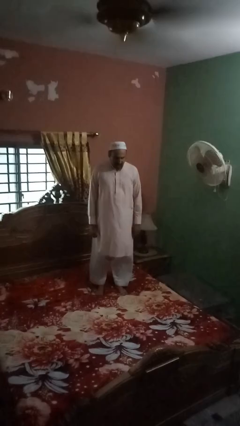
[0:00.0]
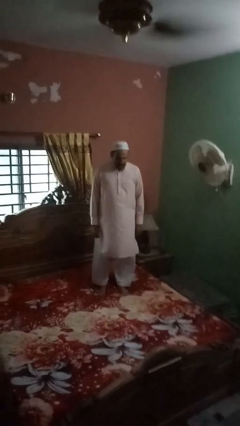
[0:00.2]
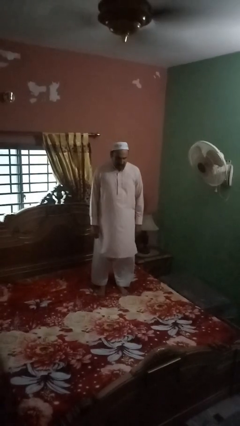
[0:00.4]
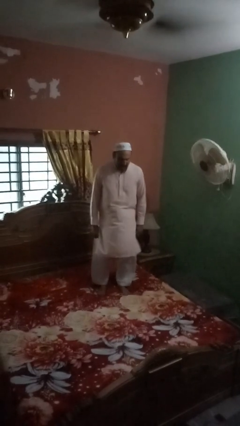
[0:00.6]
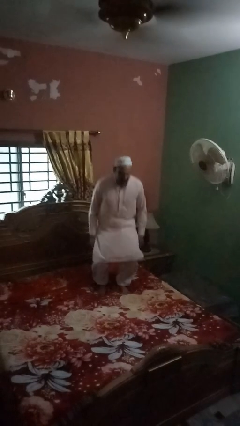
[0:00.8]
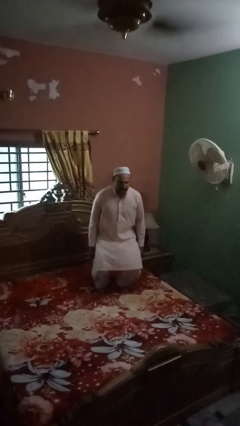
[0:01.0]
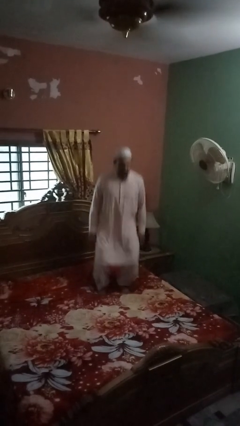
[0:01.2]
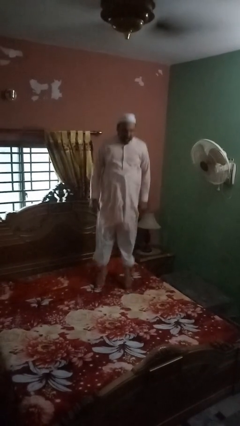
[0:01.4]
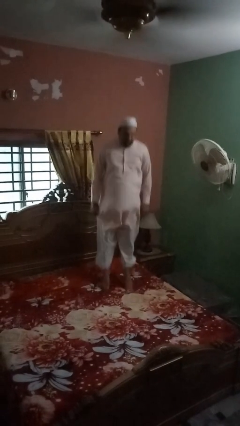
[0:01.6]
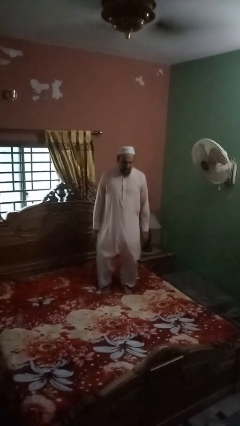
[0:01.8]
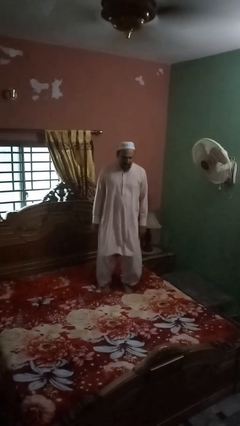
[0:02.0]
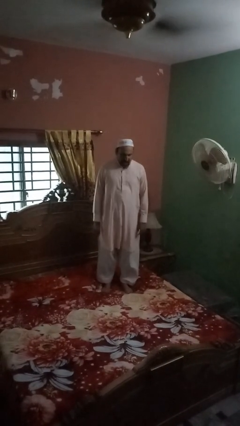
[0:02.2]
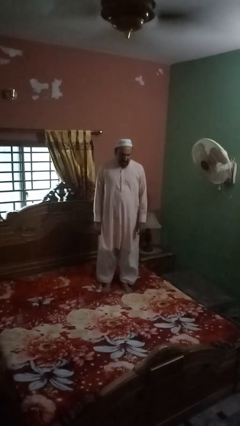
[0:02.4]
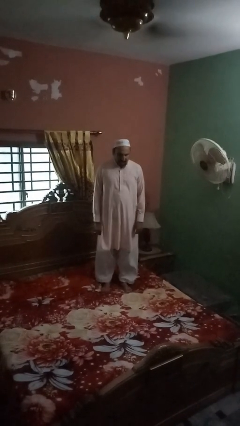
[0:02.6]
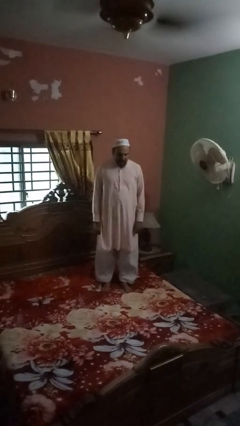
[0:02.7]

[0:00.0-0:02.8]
person jumps on bed

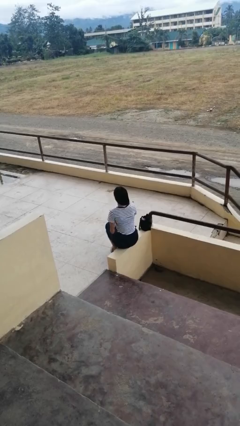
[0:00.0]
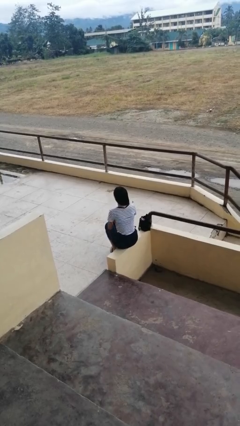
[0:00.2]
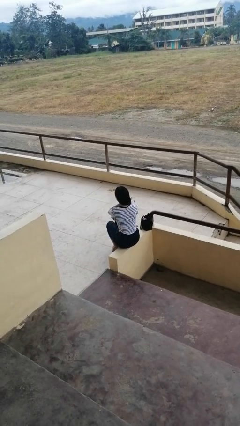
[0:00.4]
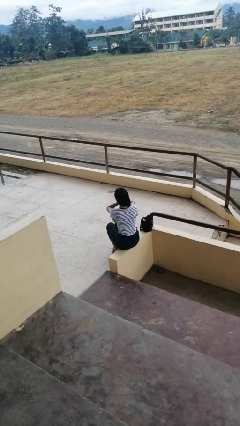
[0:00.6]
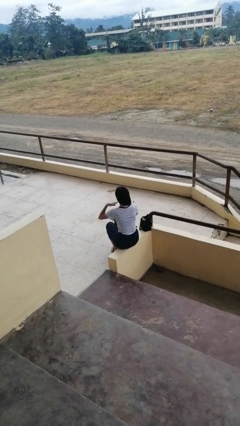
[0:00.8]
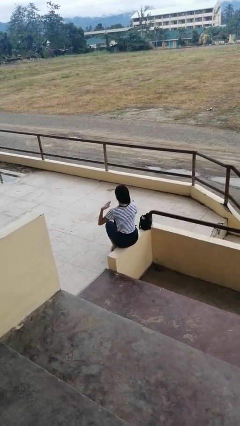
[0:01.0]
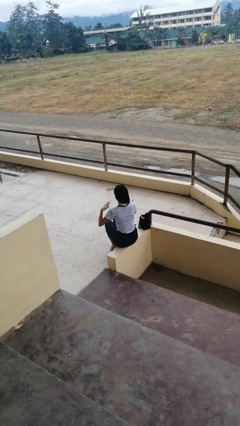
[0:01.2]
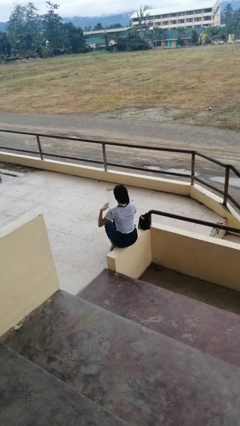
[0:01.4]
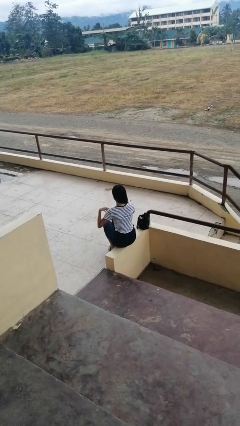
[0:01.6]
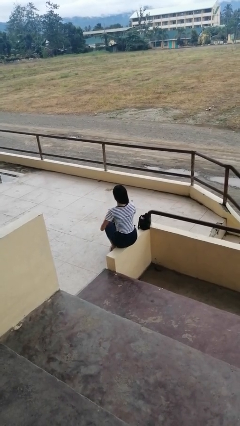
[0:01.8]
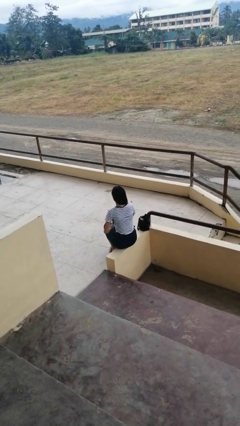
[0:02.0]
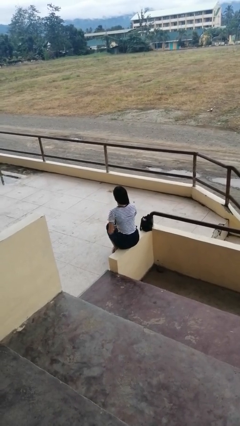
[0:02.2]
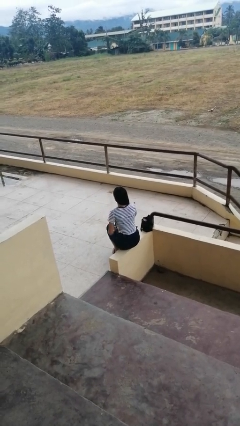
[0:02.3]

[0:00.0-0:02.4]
person gestures cut

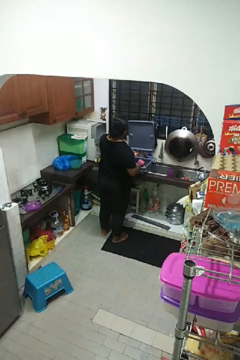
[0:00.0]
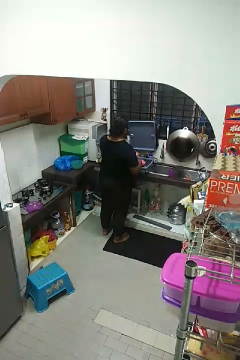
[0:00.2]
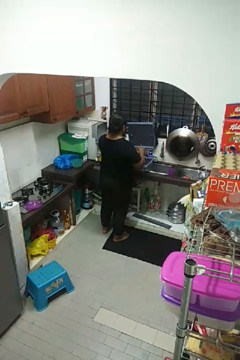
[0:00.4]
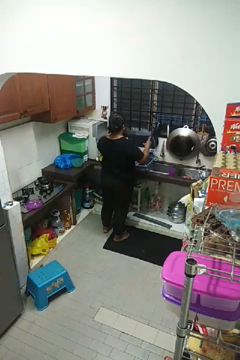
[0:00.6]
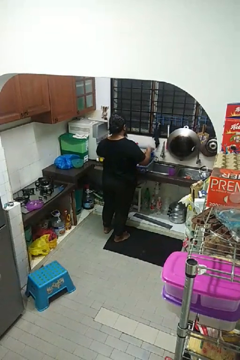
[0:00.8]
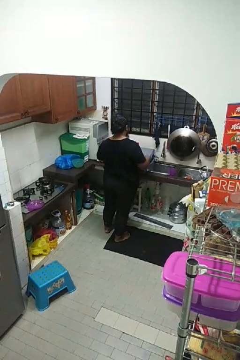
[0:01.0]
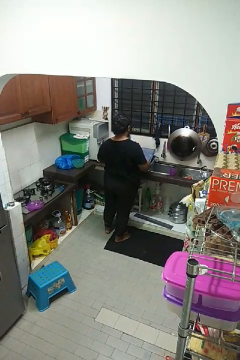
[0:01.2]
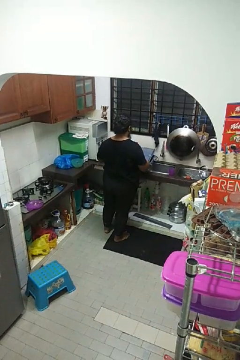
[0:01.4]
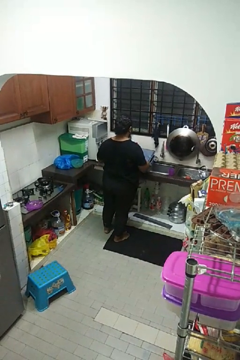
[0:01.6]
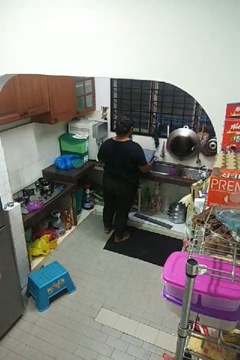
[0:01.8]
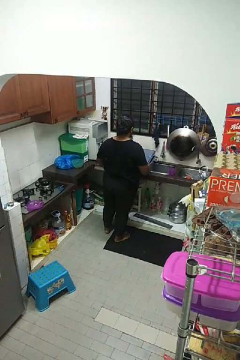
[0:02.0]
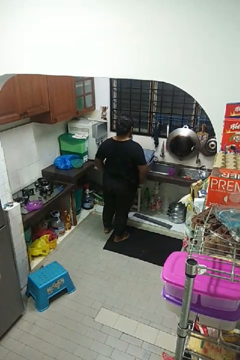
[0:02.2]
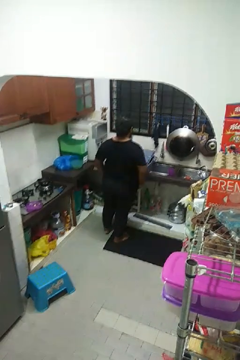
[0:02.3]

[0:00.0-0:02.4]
person closes dishwasher

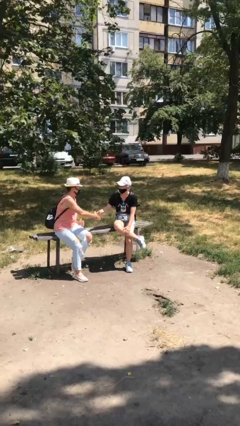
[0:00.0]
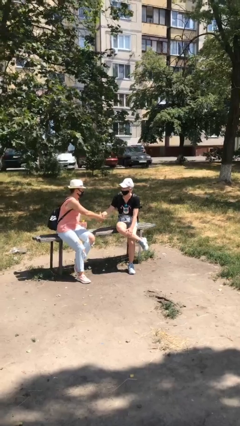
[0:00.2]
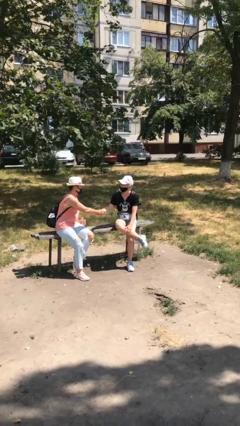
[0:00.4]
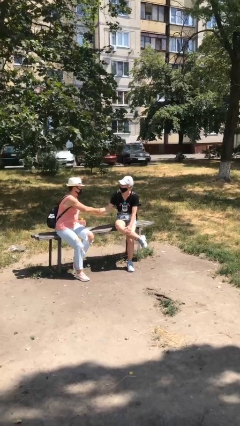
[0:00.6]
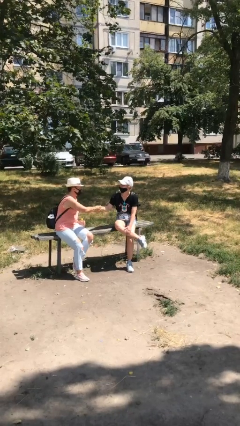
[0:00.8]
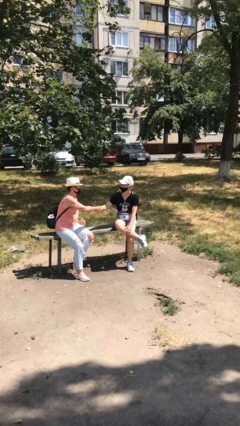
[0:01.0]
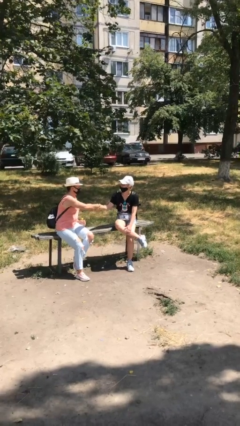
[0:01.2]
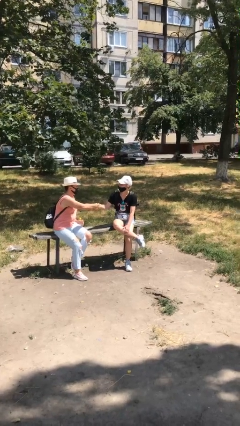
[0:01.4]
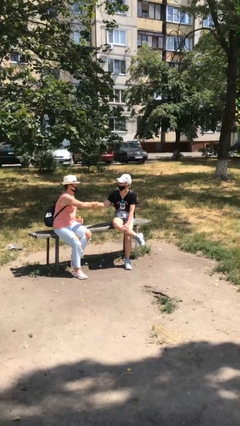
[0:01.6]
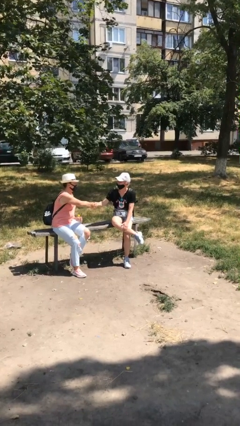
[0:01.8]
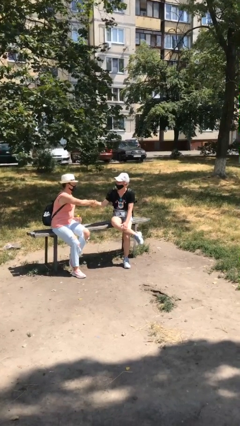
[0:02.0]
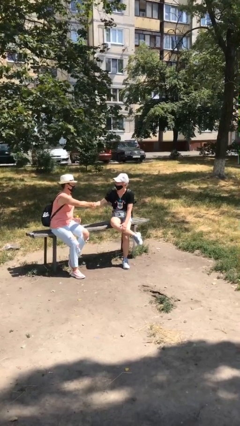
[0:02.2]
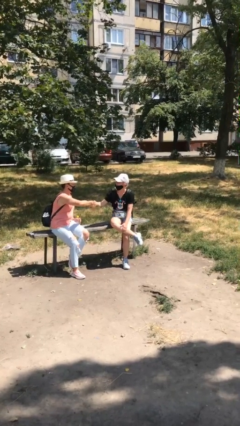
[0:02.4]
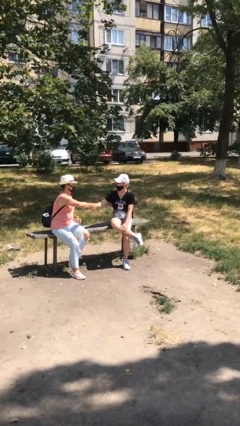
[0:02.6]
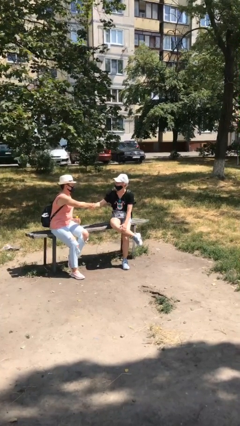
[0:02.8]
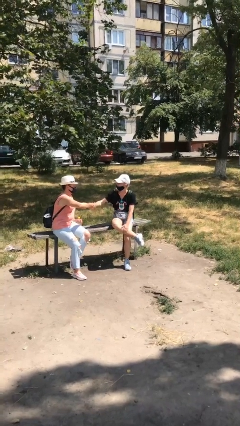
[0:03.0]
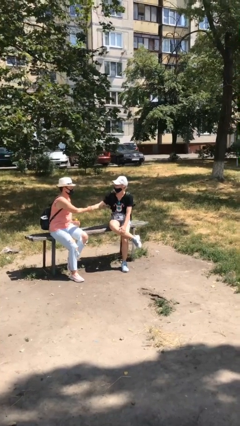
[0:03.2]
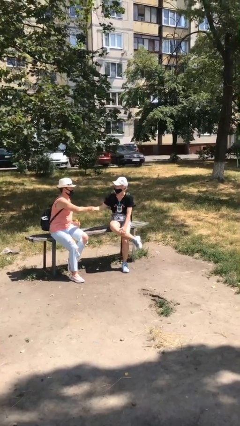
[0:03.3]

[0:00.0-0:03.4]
person shakes hand

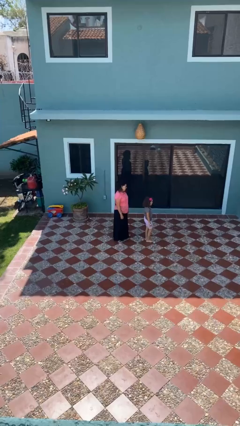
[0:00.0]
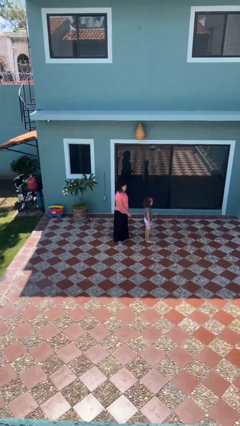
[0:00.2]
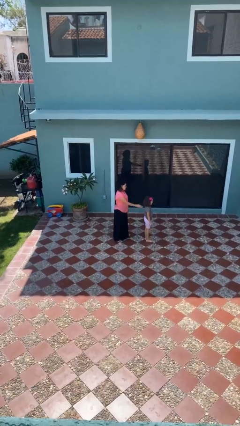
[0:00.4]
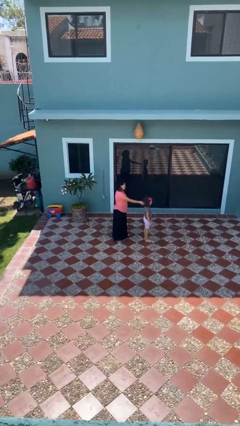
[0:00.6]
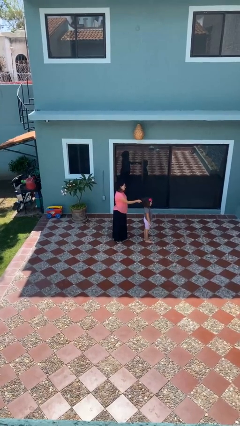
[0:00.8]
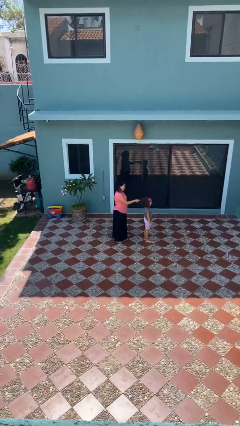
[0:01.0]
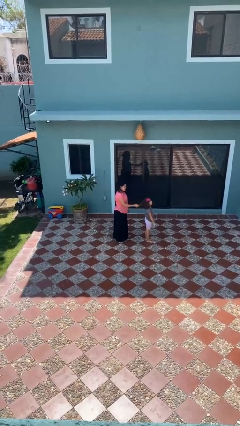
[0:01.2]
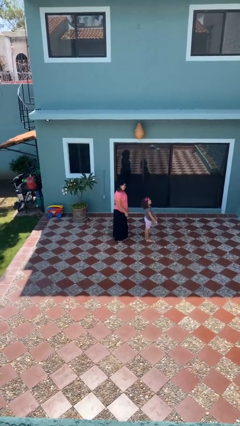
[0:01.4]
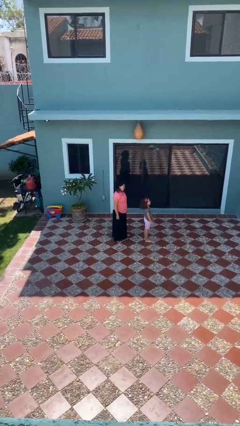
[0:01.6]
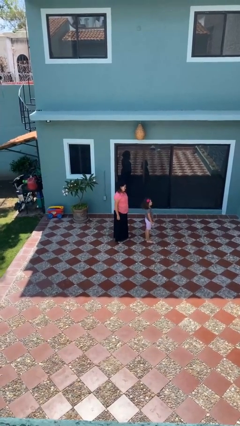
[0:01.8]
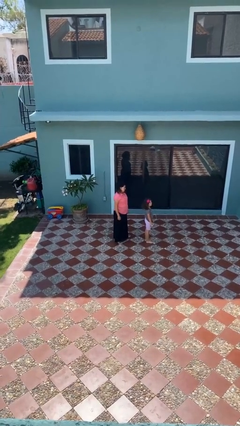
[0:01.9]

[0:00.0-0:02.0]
person grabs person by hair

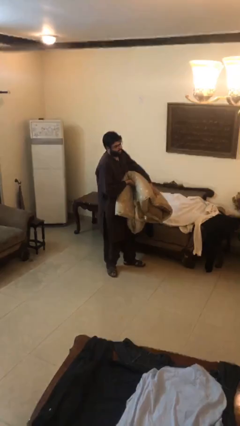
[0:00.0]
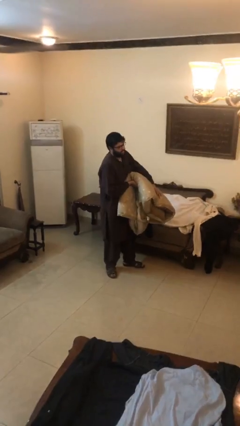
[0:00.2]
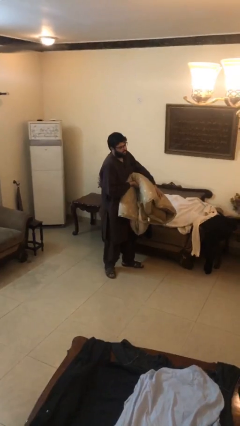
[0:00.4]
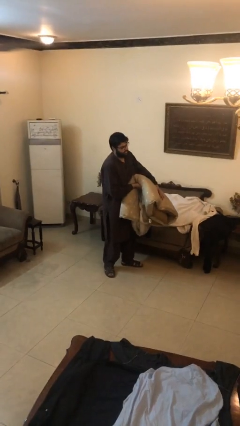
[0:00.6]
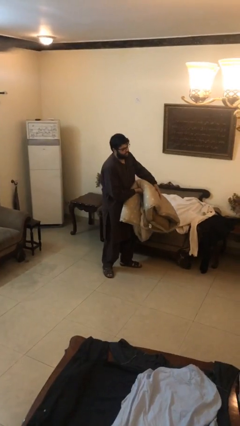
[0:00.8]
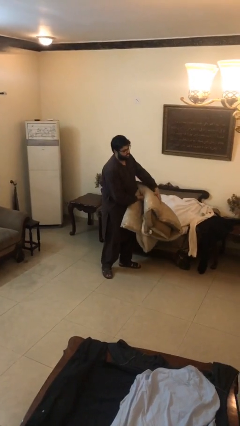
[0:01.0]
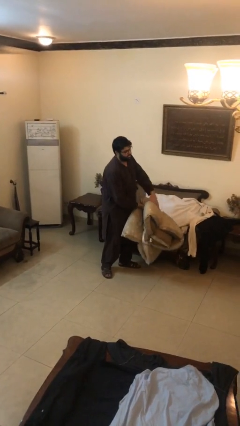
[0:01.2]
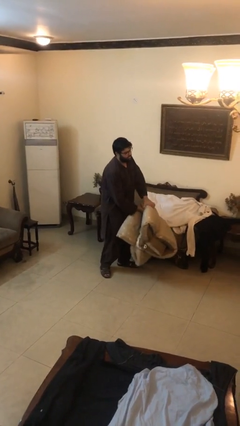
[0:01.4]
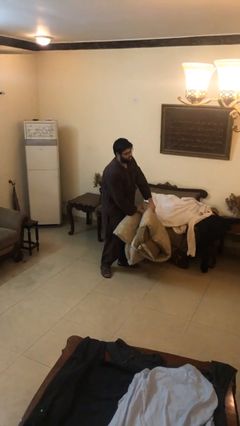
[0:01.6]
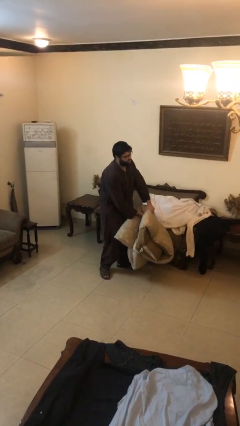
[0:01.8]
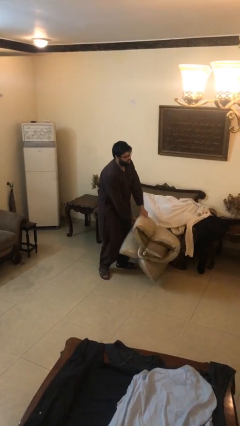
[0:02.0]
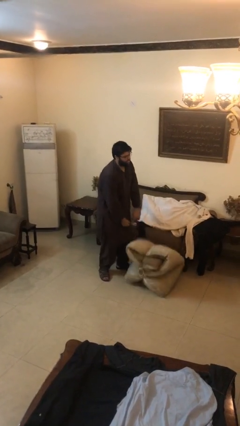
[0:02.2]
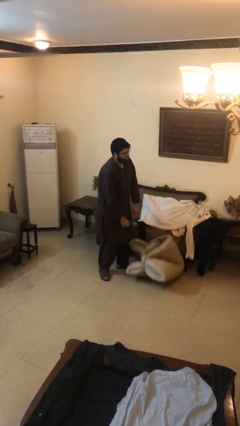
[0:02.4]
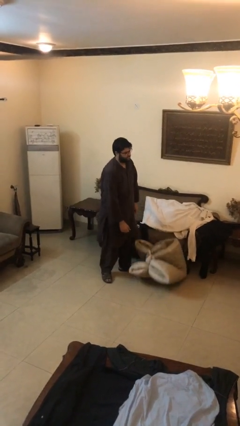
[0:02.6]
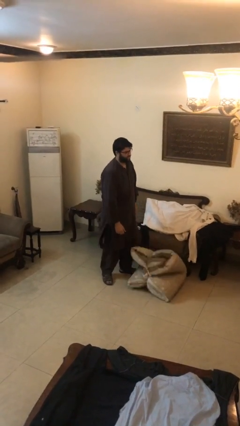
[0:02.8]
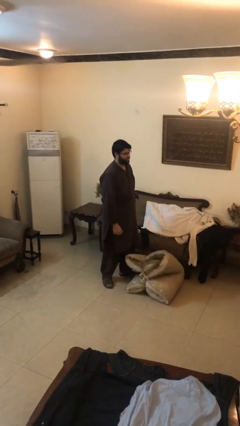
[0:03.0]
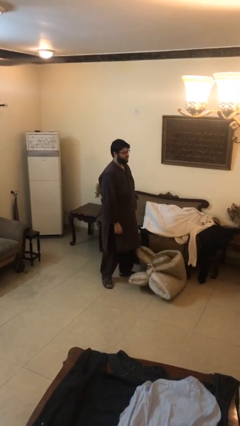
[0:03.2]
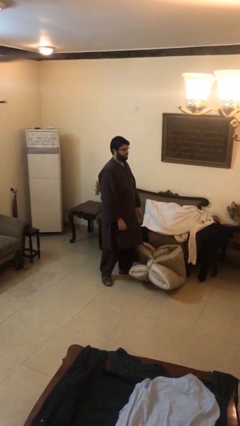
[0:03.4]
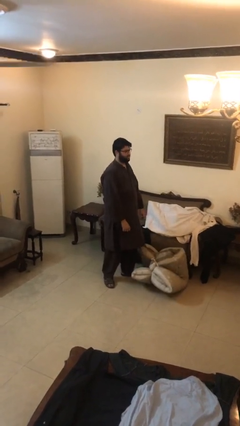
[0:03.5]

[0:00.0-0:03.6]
person puts down object on floor

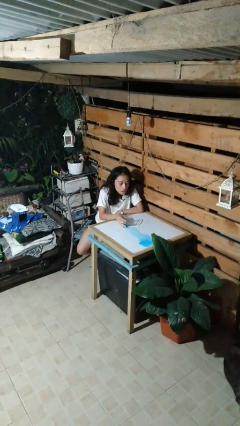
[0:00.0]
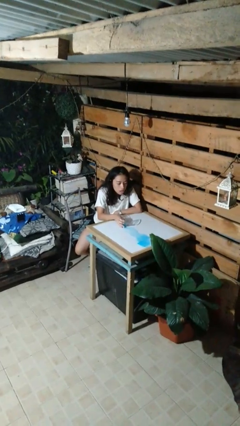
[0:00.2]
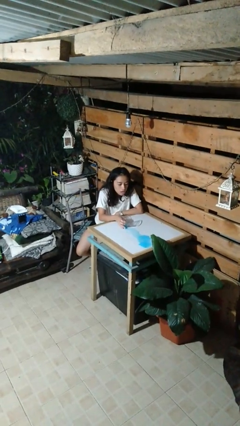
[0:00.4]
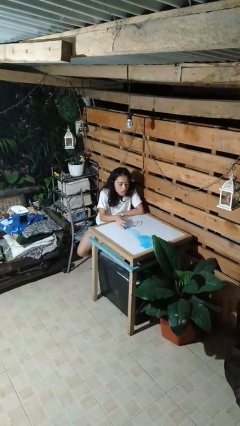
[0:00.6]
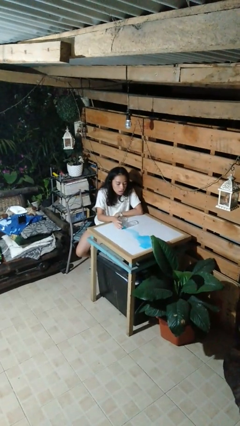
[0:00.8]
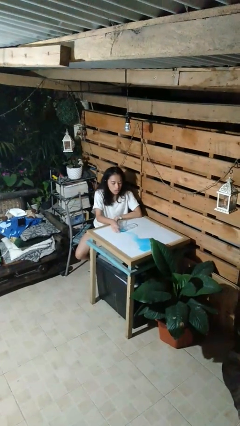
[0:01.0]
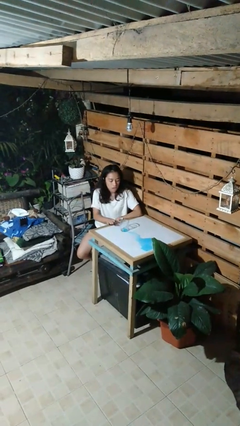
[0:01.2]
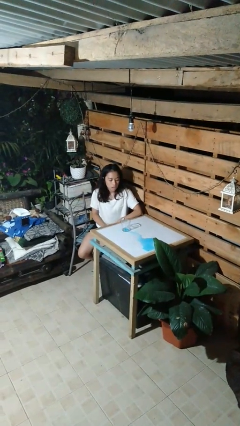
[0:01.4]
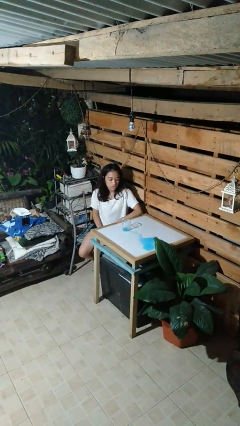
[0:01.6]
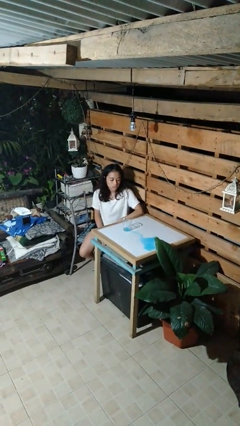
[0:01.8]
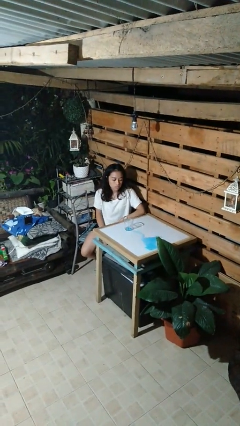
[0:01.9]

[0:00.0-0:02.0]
person sets upright glass
